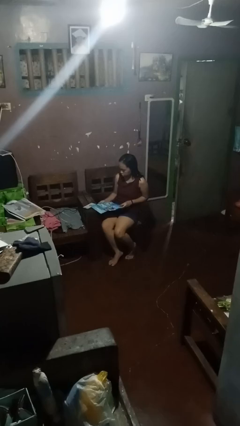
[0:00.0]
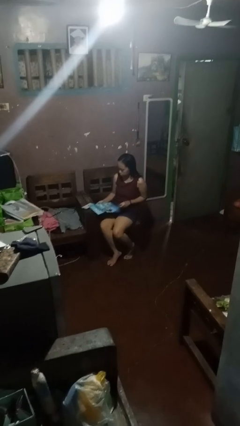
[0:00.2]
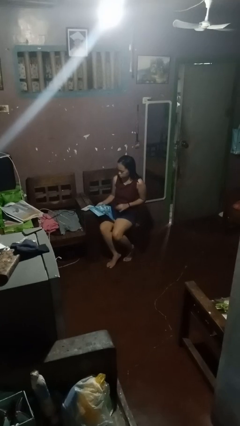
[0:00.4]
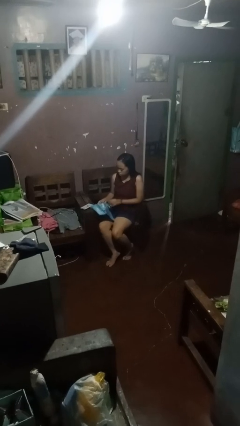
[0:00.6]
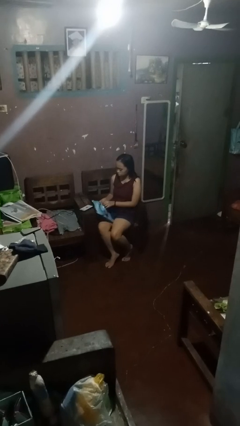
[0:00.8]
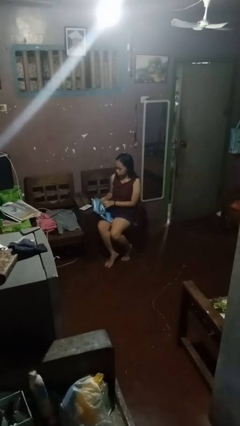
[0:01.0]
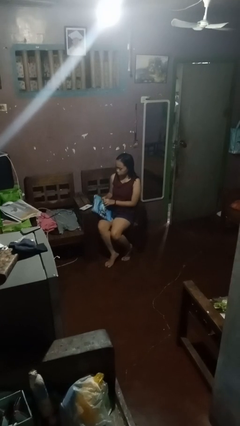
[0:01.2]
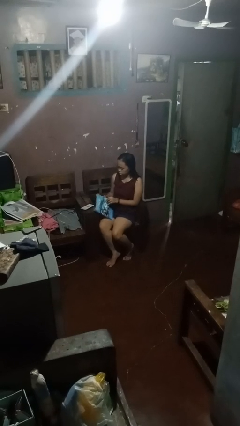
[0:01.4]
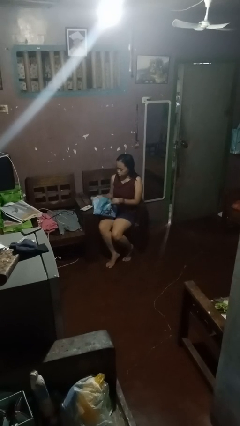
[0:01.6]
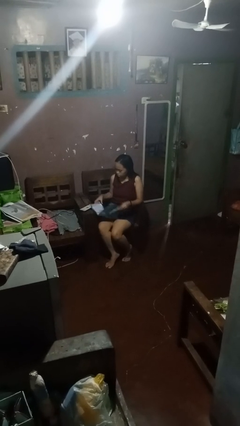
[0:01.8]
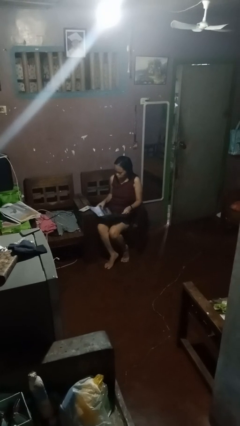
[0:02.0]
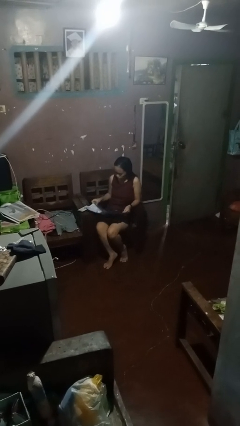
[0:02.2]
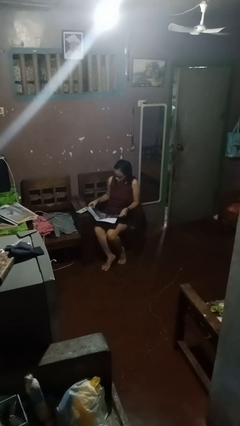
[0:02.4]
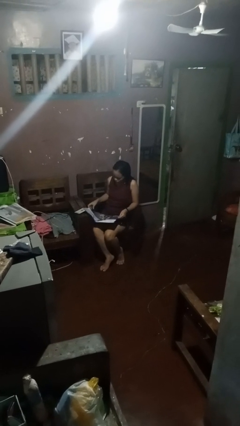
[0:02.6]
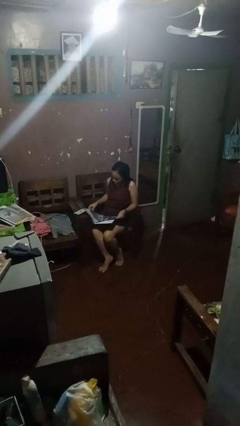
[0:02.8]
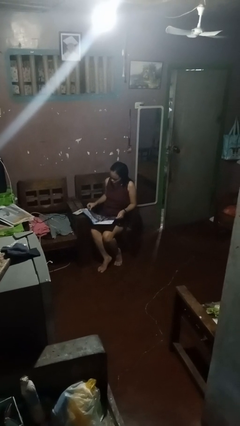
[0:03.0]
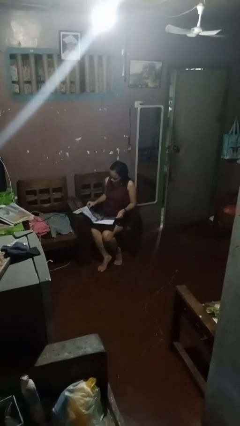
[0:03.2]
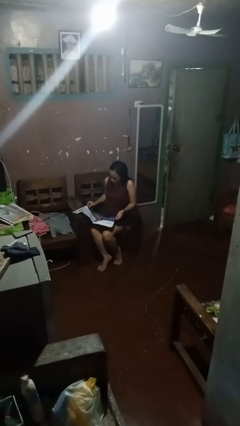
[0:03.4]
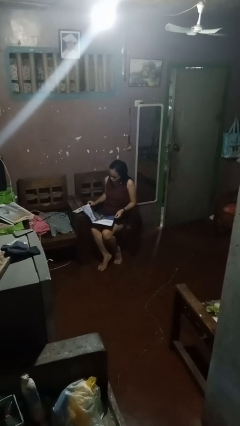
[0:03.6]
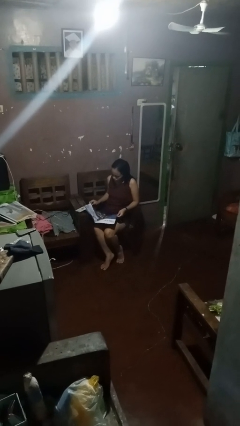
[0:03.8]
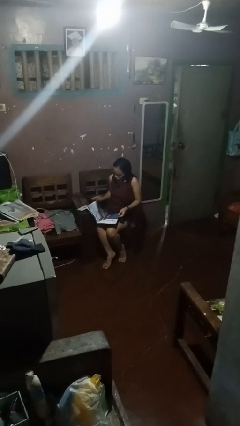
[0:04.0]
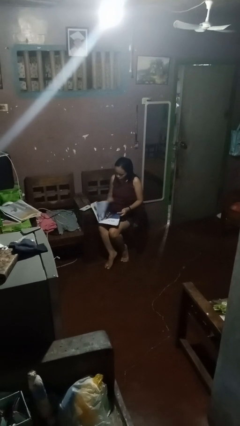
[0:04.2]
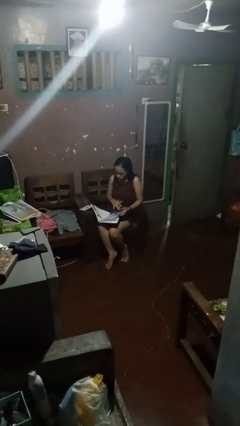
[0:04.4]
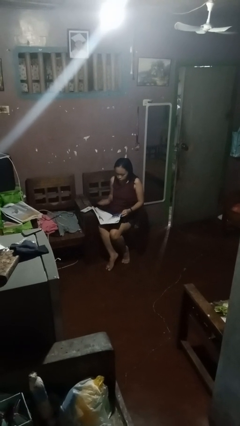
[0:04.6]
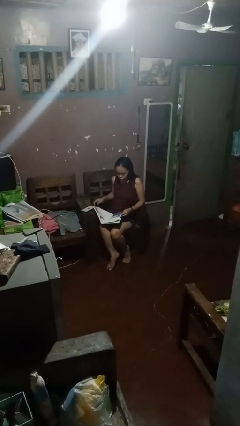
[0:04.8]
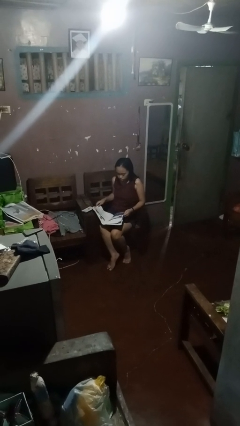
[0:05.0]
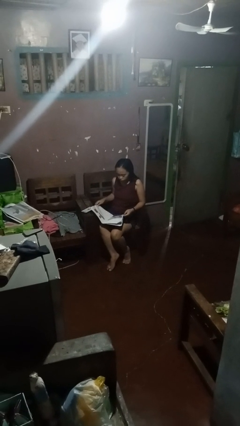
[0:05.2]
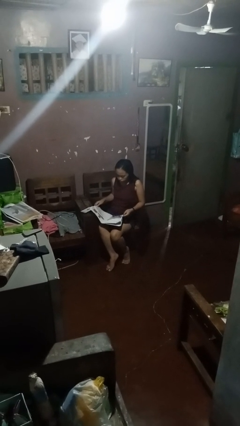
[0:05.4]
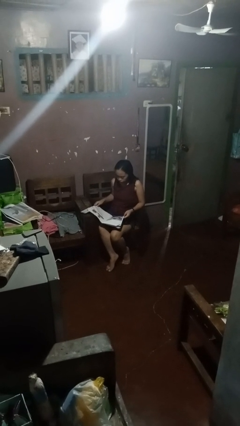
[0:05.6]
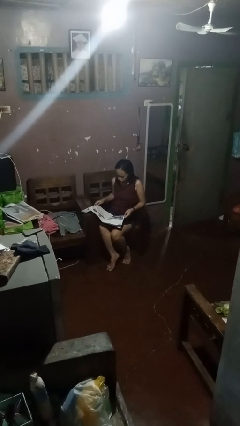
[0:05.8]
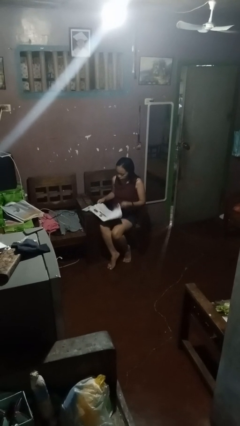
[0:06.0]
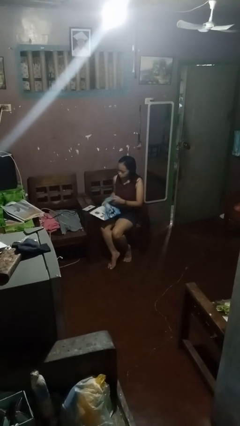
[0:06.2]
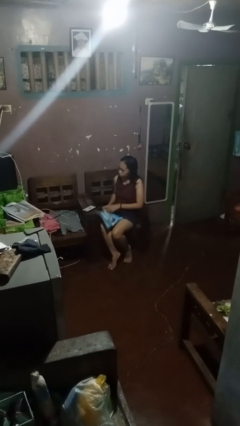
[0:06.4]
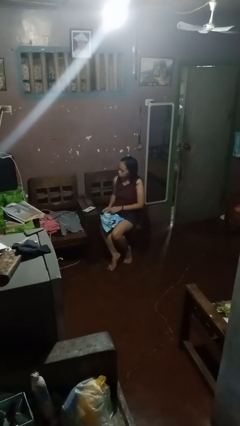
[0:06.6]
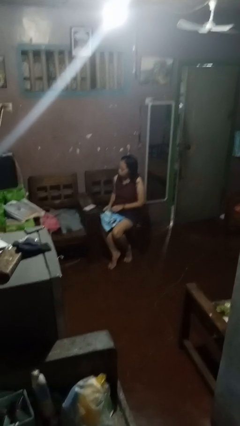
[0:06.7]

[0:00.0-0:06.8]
person reads magazine

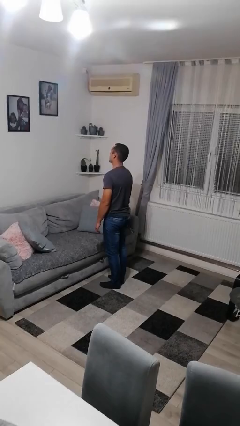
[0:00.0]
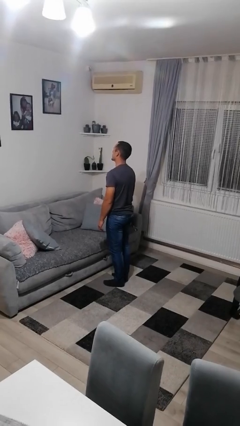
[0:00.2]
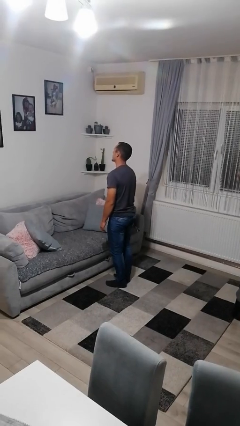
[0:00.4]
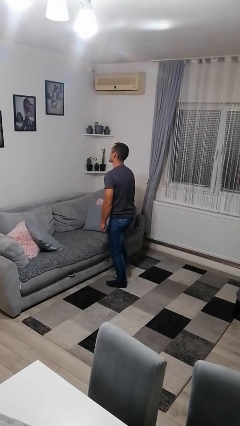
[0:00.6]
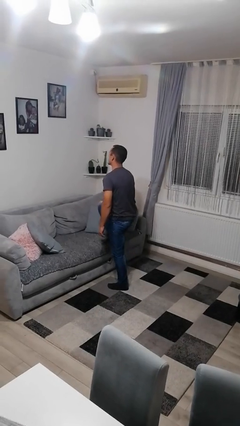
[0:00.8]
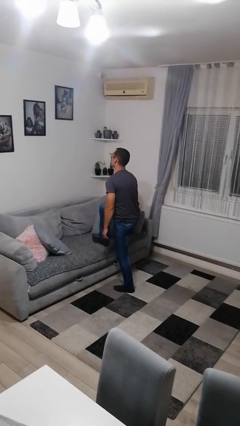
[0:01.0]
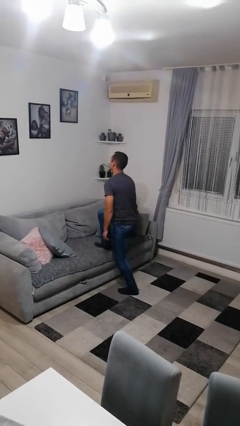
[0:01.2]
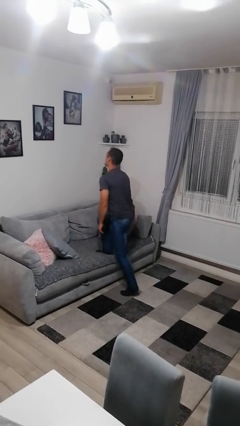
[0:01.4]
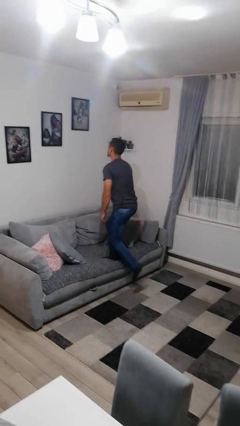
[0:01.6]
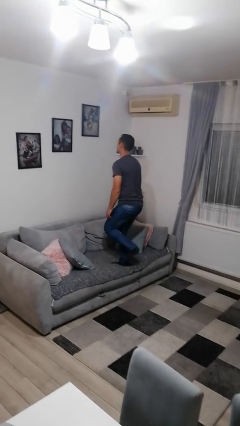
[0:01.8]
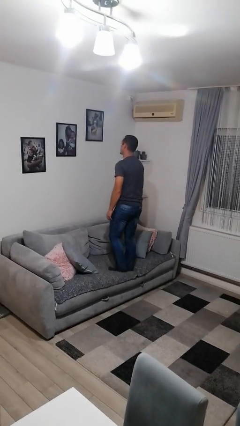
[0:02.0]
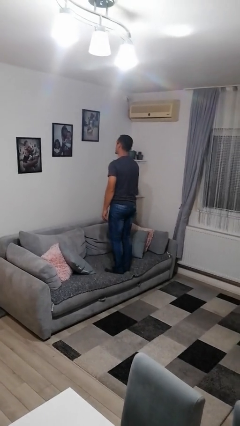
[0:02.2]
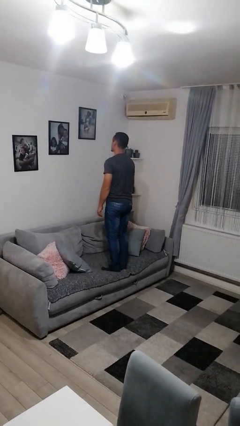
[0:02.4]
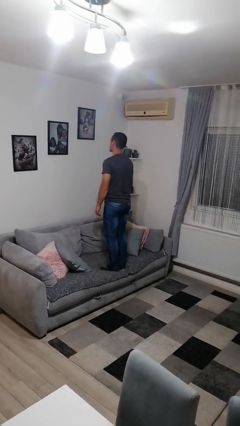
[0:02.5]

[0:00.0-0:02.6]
person climbs on couch

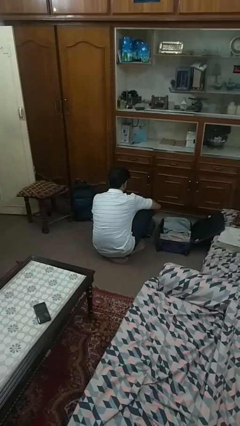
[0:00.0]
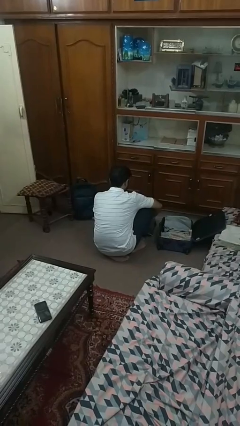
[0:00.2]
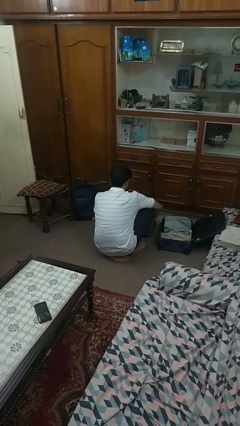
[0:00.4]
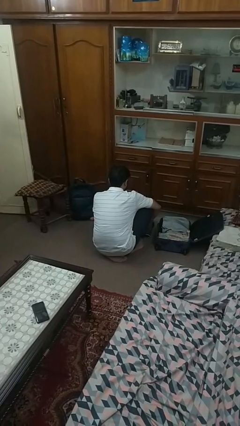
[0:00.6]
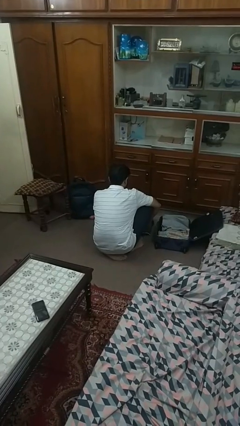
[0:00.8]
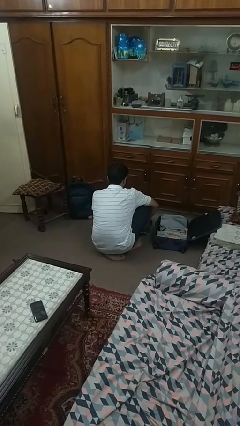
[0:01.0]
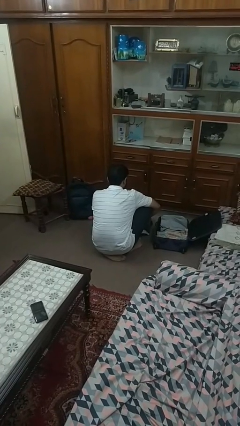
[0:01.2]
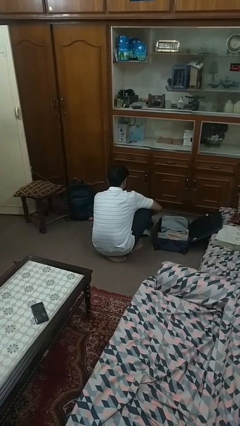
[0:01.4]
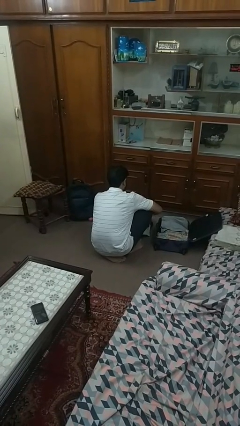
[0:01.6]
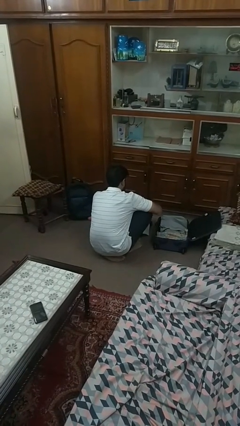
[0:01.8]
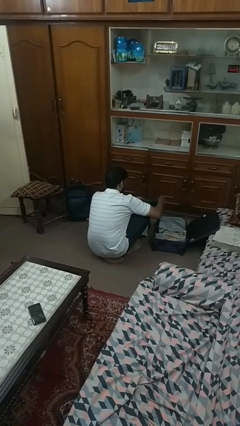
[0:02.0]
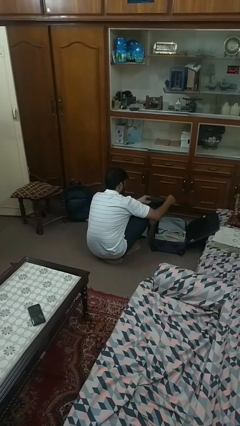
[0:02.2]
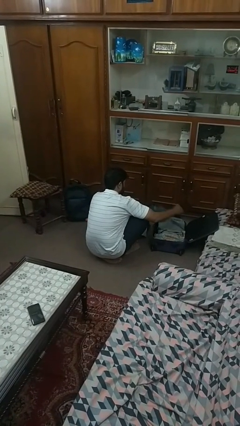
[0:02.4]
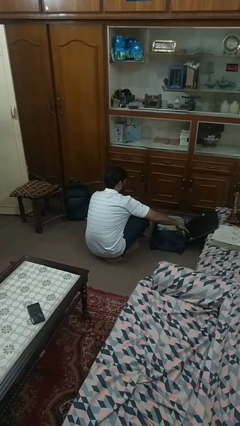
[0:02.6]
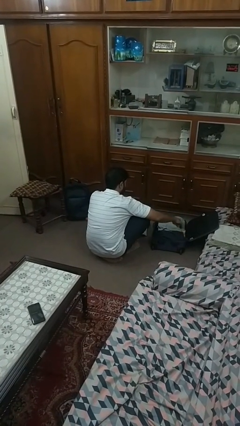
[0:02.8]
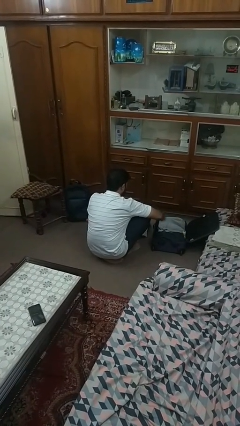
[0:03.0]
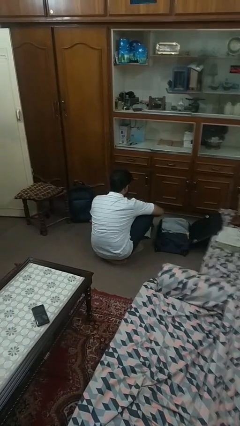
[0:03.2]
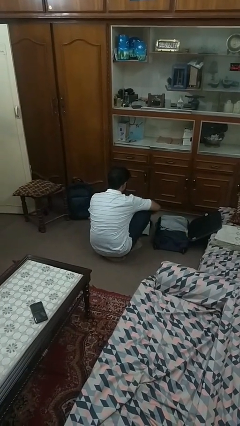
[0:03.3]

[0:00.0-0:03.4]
person loads clothes into suitcase

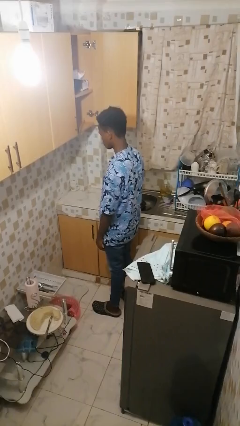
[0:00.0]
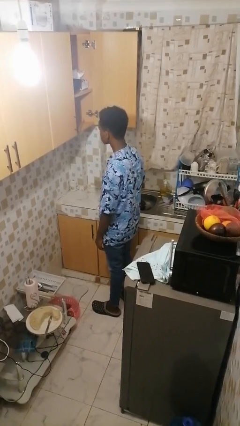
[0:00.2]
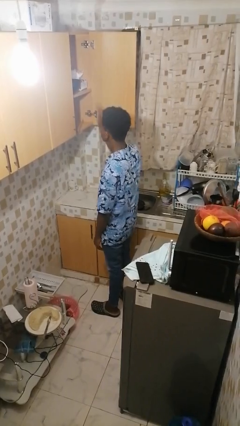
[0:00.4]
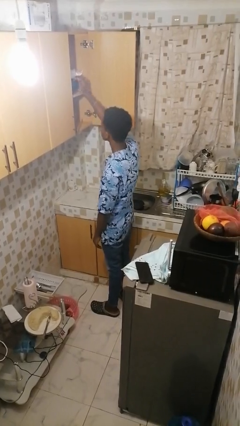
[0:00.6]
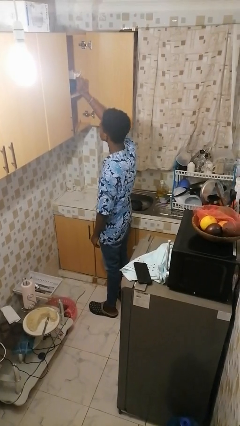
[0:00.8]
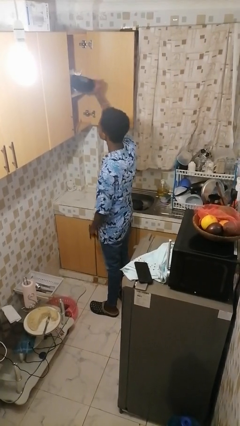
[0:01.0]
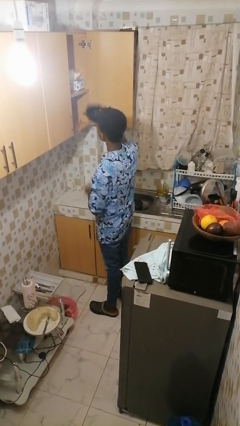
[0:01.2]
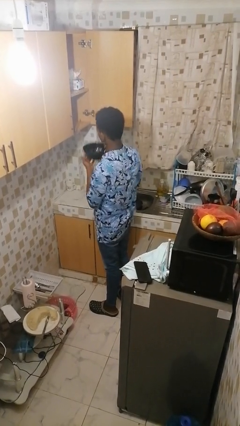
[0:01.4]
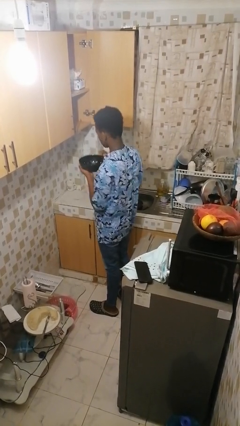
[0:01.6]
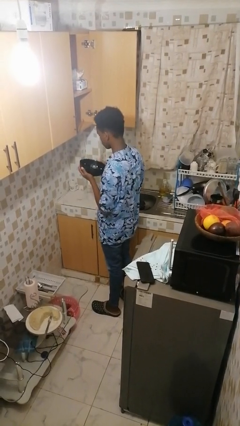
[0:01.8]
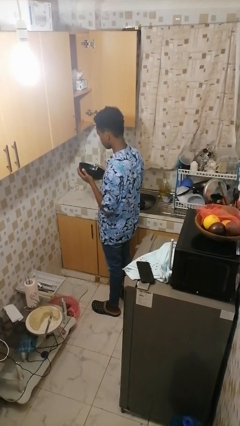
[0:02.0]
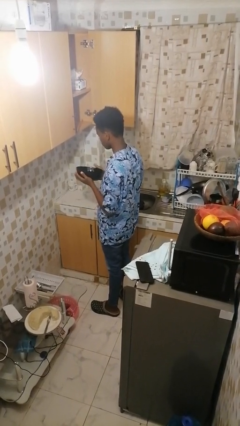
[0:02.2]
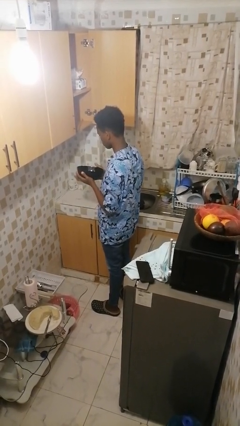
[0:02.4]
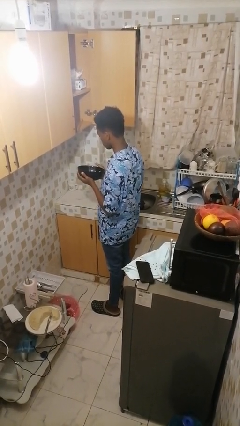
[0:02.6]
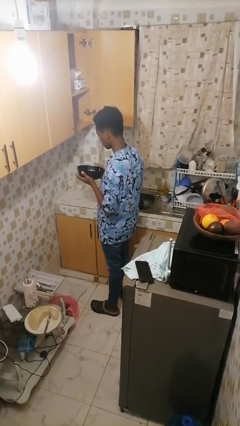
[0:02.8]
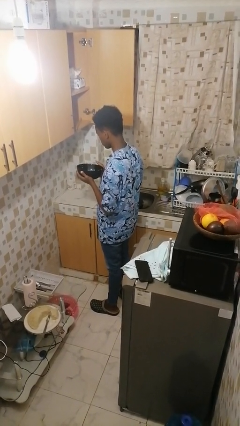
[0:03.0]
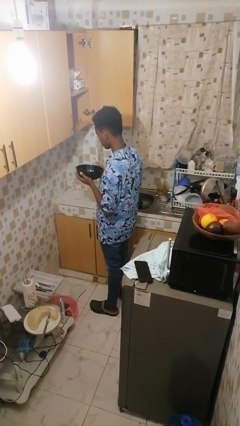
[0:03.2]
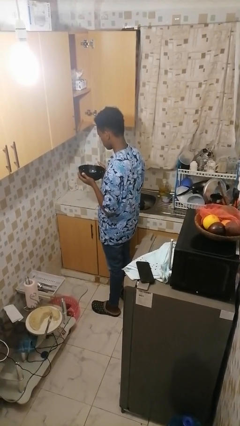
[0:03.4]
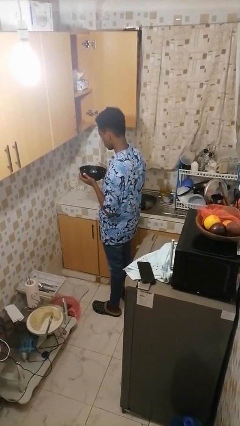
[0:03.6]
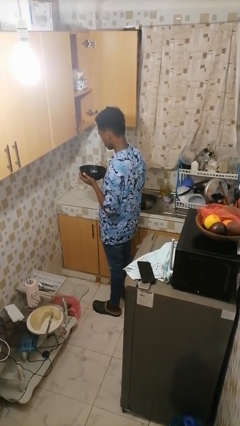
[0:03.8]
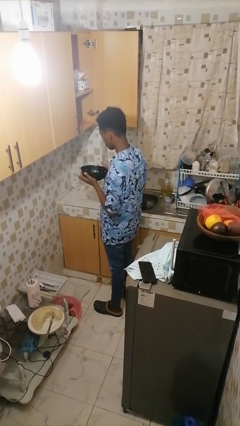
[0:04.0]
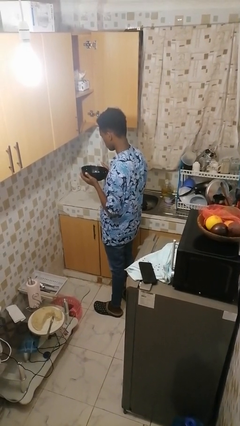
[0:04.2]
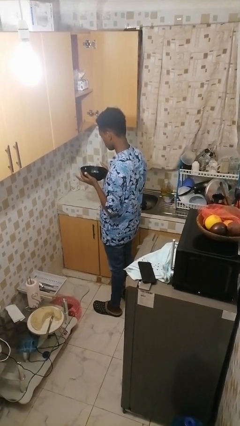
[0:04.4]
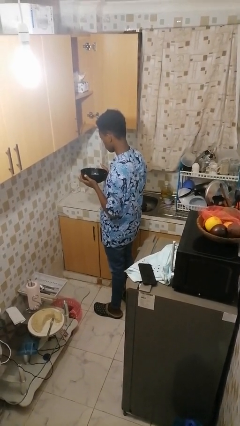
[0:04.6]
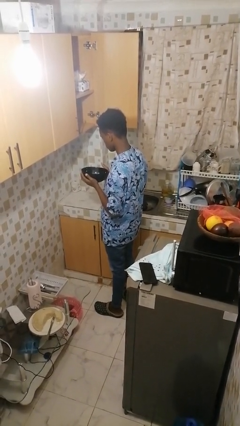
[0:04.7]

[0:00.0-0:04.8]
person picks up object from cabinet
